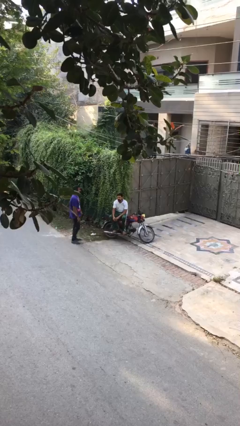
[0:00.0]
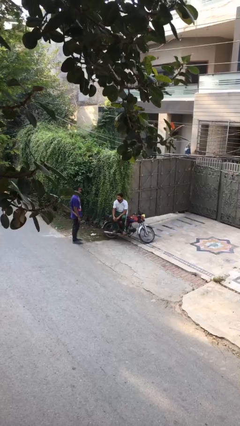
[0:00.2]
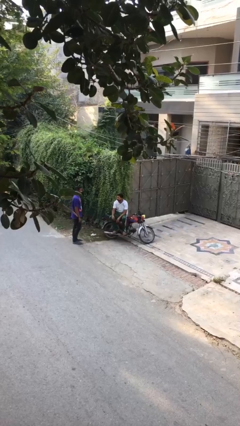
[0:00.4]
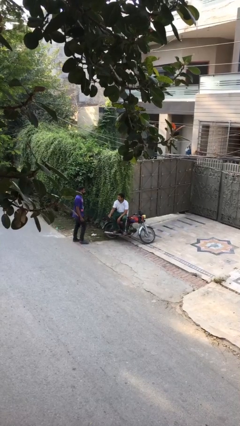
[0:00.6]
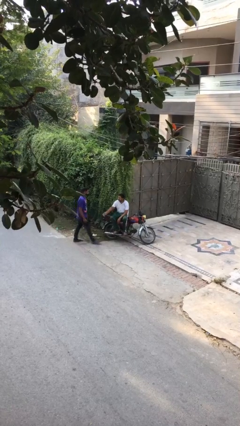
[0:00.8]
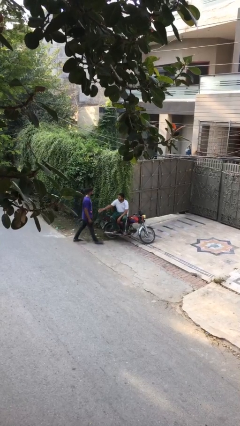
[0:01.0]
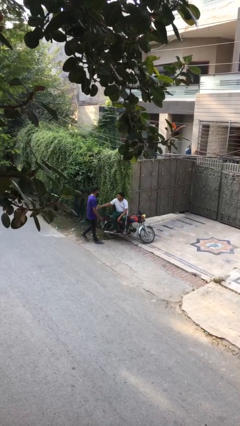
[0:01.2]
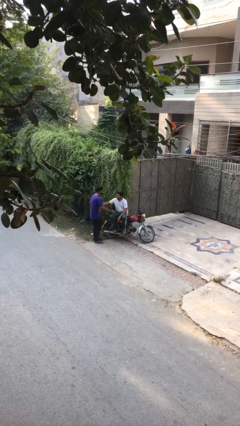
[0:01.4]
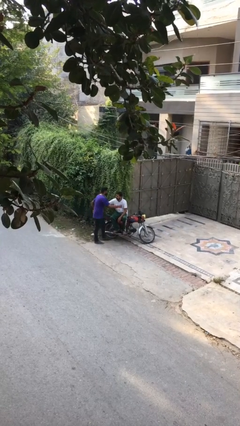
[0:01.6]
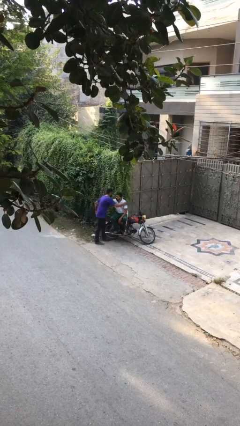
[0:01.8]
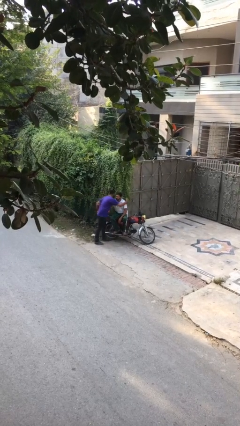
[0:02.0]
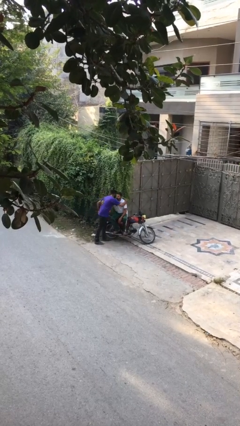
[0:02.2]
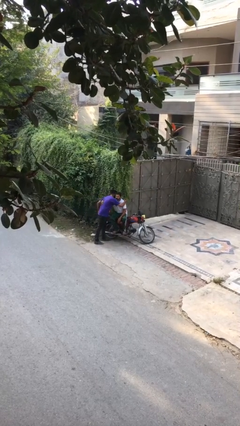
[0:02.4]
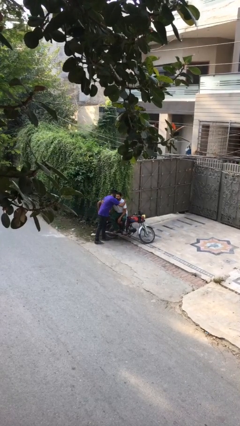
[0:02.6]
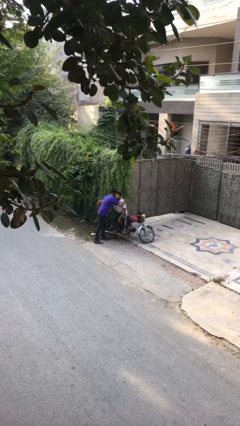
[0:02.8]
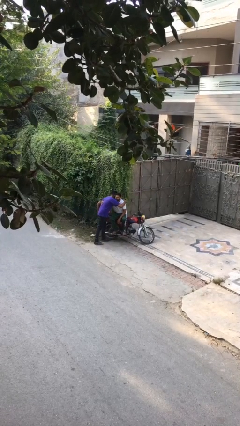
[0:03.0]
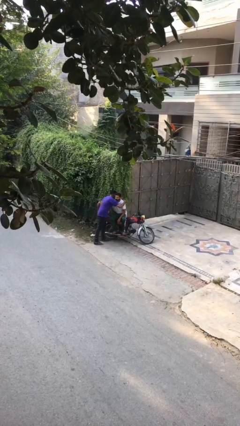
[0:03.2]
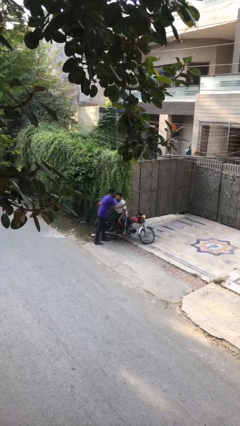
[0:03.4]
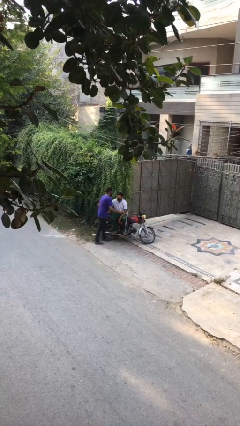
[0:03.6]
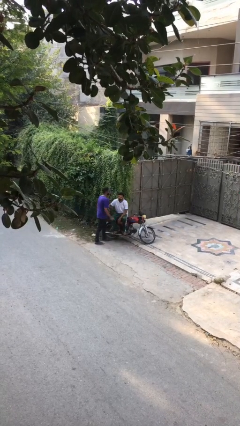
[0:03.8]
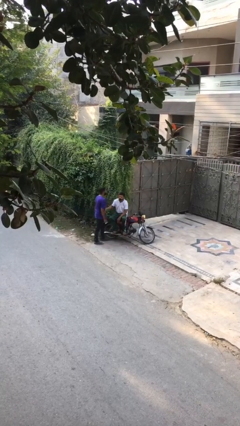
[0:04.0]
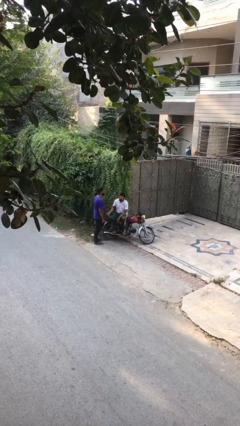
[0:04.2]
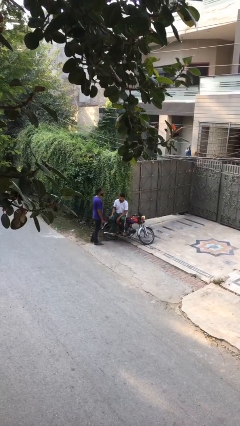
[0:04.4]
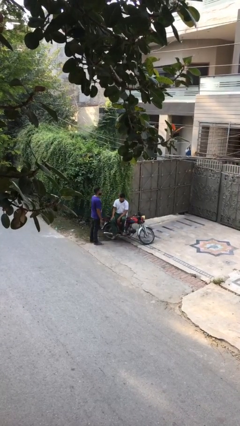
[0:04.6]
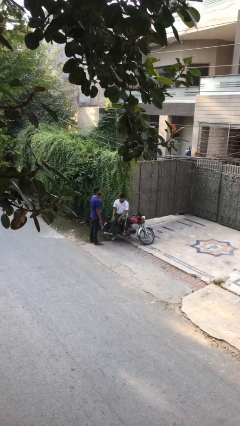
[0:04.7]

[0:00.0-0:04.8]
person embraces person

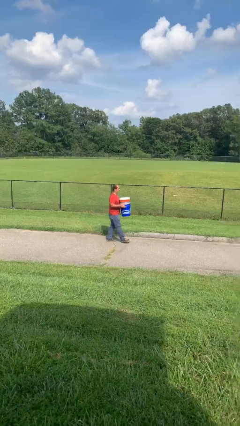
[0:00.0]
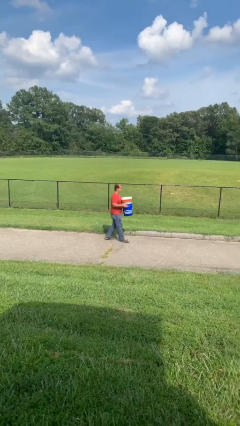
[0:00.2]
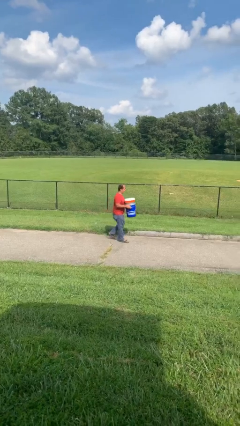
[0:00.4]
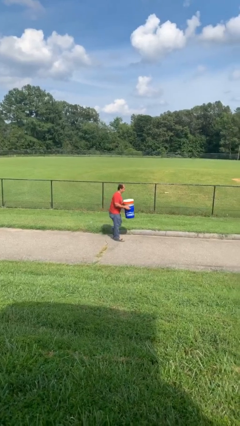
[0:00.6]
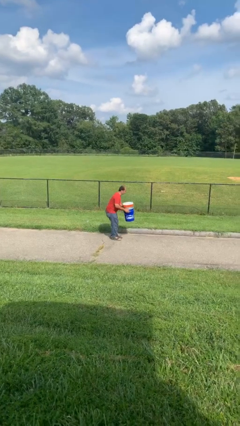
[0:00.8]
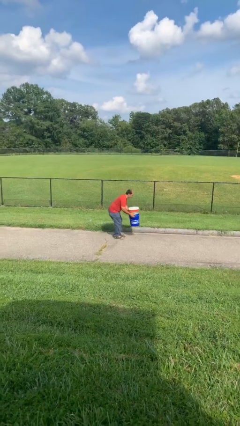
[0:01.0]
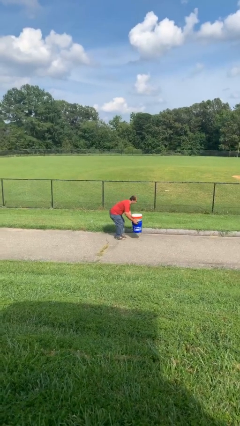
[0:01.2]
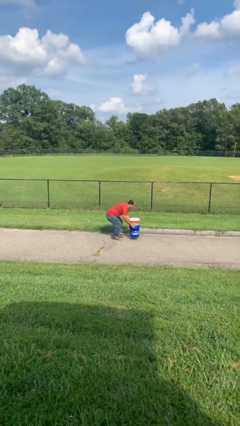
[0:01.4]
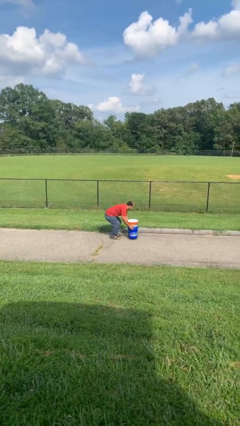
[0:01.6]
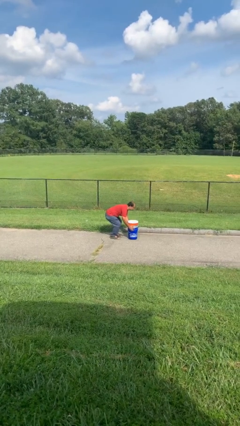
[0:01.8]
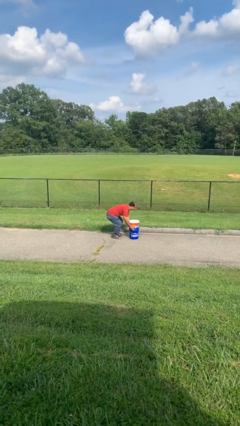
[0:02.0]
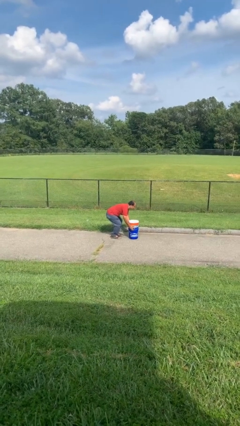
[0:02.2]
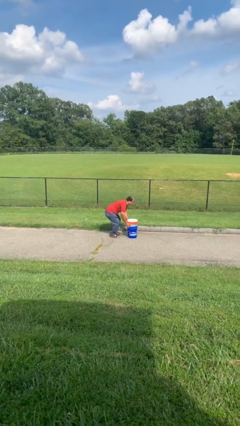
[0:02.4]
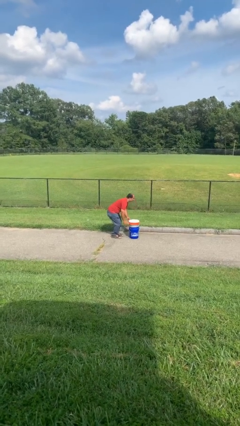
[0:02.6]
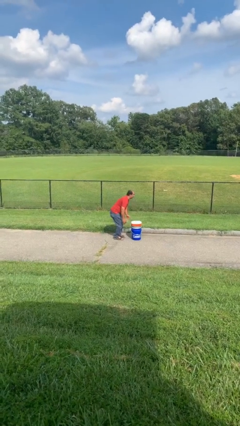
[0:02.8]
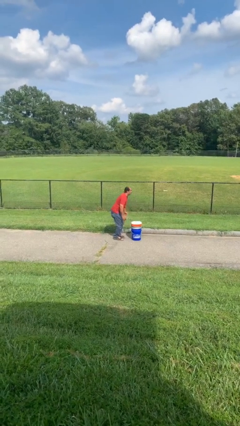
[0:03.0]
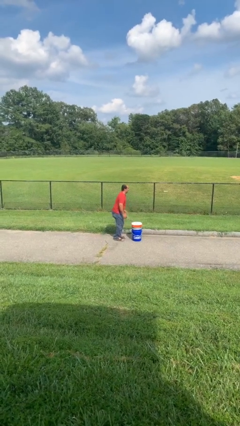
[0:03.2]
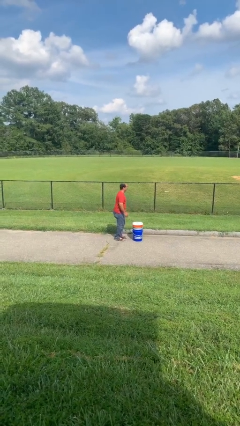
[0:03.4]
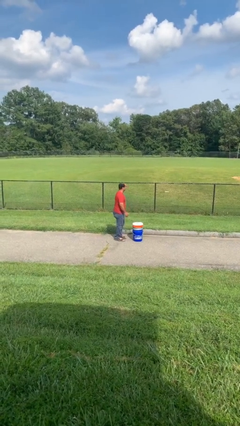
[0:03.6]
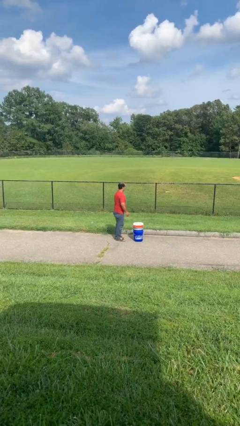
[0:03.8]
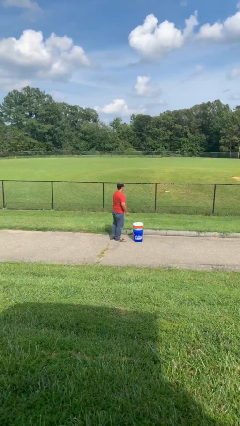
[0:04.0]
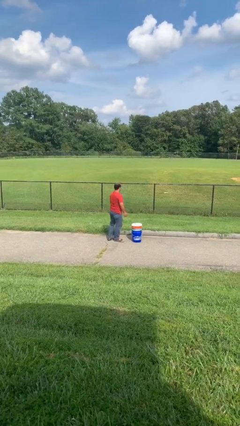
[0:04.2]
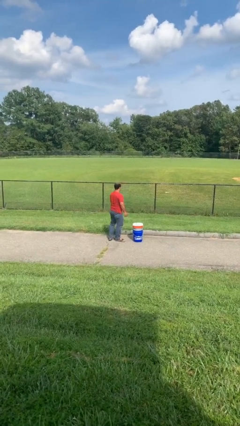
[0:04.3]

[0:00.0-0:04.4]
person puts down object on floor

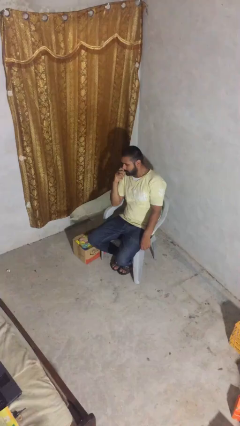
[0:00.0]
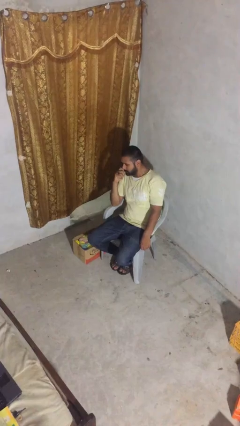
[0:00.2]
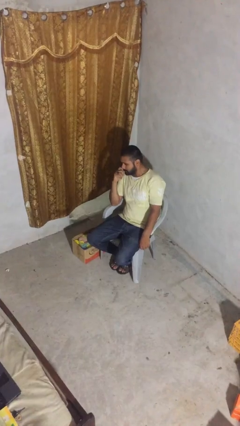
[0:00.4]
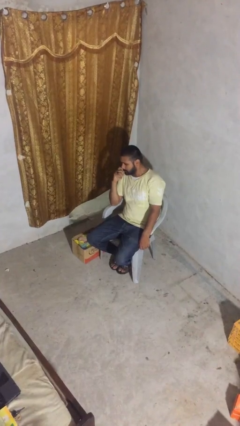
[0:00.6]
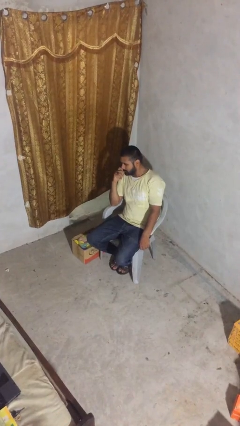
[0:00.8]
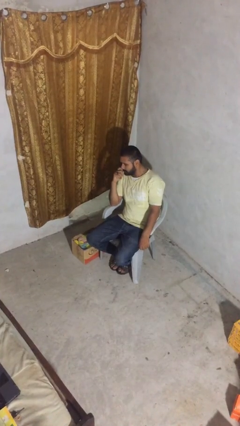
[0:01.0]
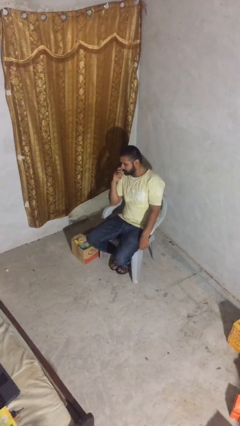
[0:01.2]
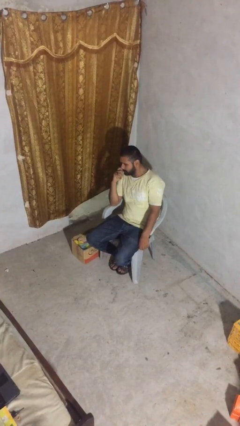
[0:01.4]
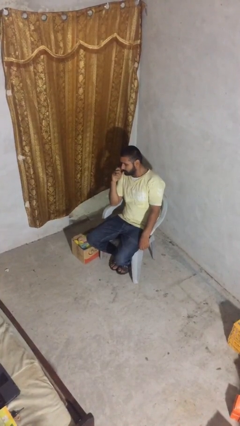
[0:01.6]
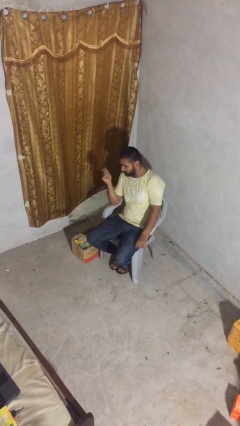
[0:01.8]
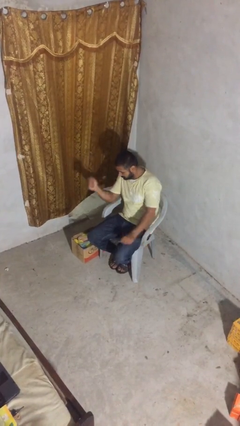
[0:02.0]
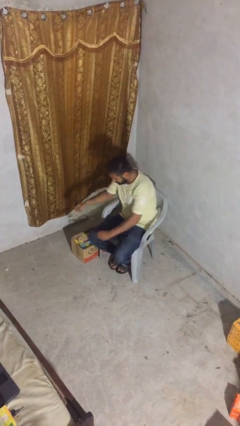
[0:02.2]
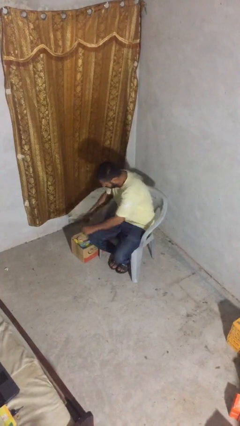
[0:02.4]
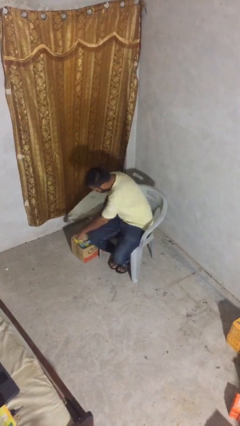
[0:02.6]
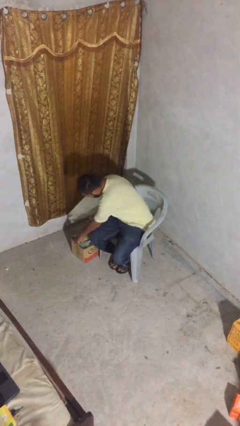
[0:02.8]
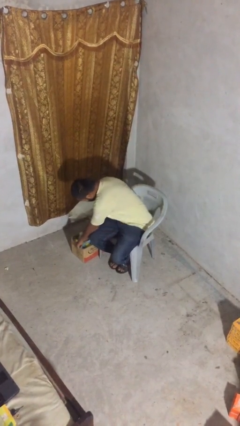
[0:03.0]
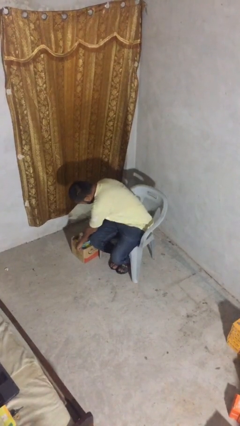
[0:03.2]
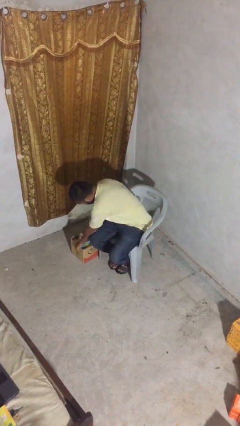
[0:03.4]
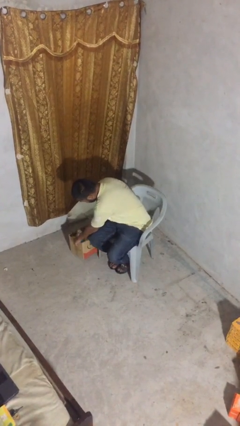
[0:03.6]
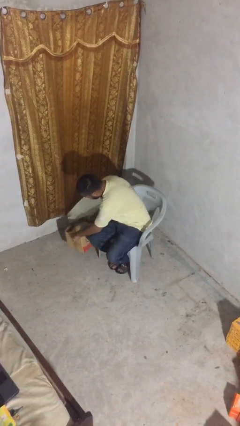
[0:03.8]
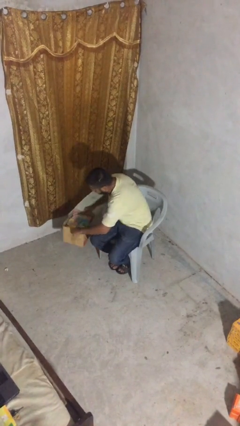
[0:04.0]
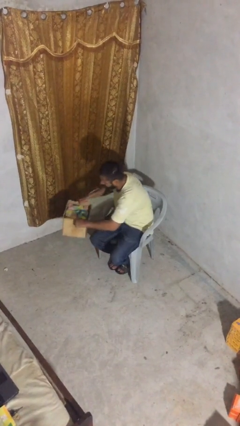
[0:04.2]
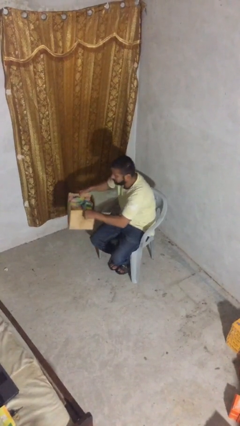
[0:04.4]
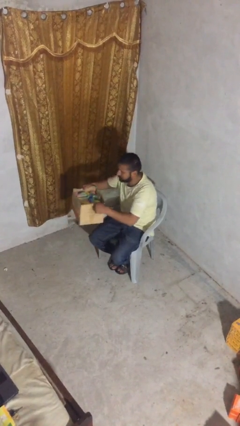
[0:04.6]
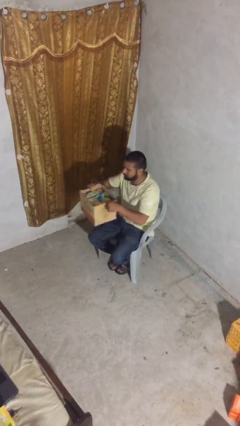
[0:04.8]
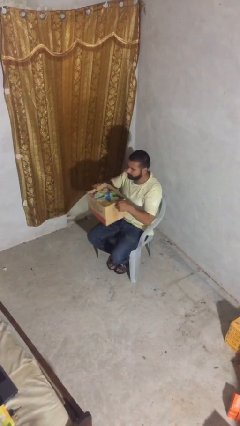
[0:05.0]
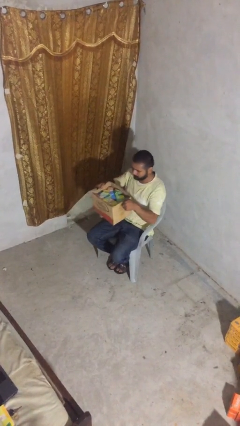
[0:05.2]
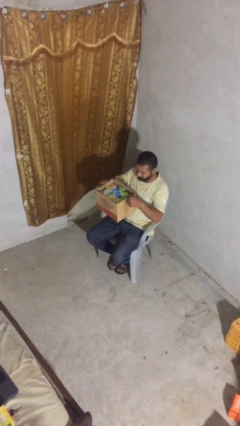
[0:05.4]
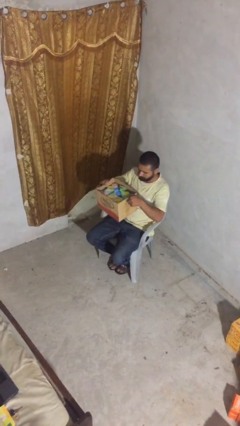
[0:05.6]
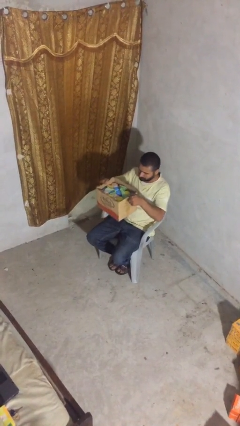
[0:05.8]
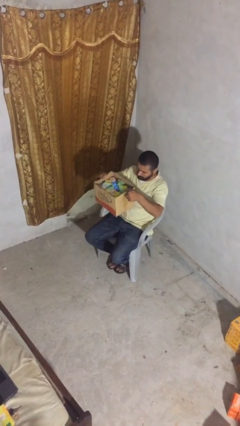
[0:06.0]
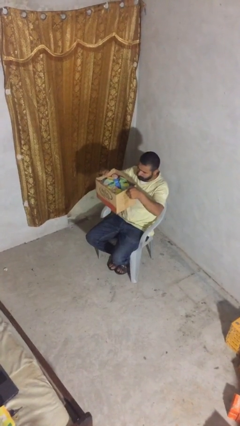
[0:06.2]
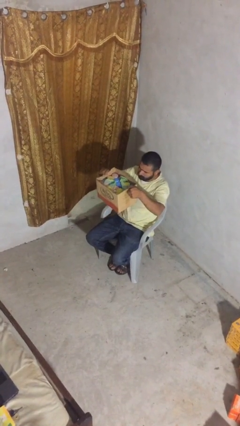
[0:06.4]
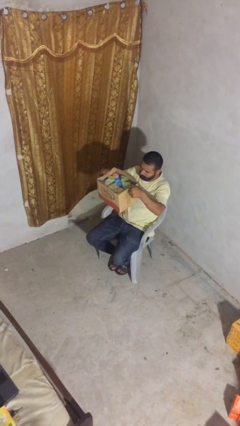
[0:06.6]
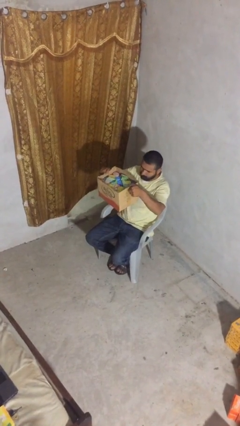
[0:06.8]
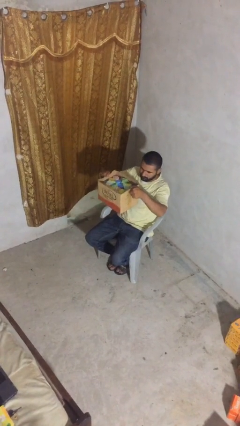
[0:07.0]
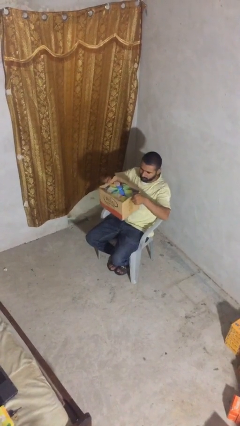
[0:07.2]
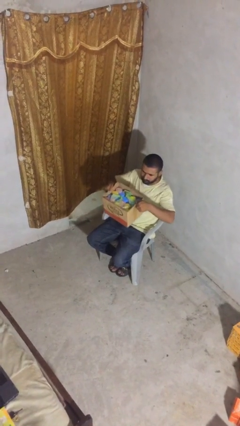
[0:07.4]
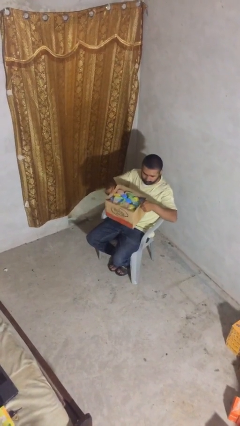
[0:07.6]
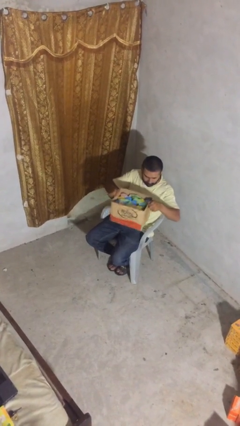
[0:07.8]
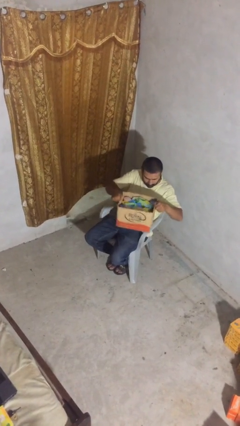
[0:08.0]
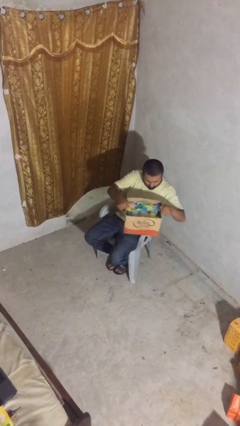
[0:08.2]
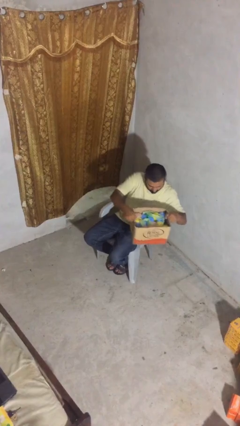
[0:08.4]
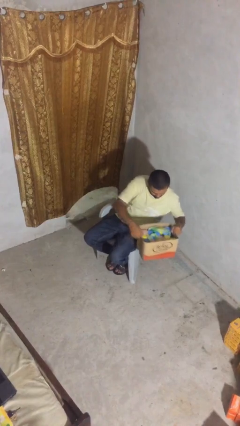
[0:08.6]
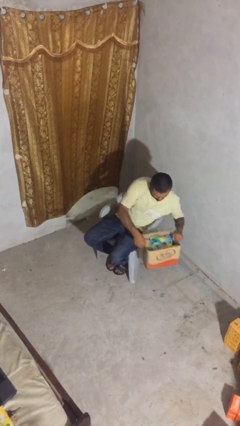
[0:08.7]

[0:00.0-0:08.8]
person picks up object from floor
